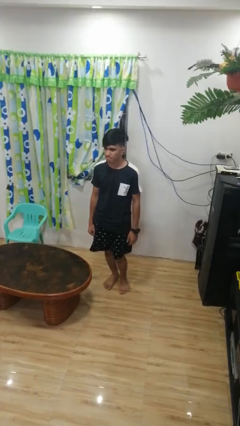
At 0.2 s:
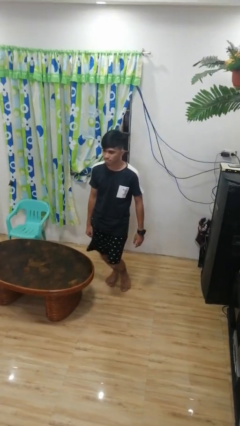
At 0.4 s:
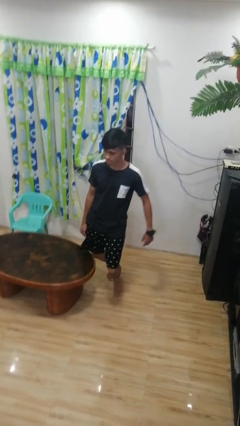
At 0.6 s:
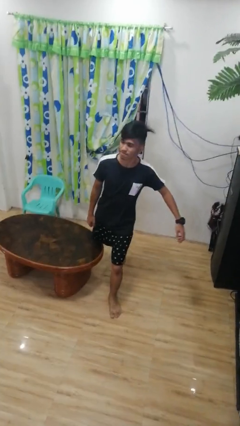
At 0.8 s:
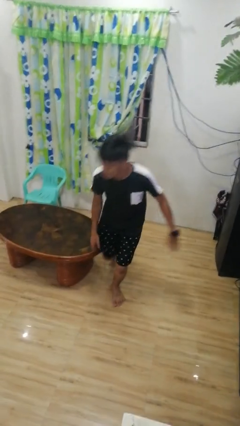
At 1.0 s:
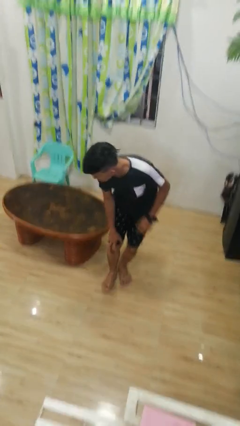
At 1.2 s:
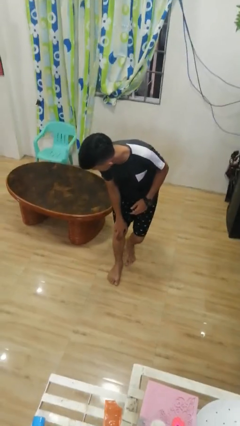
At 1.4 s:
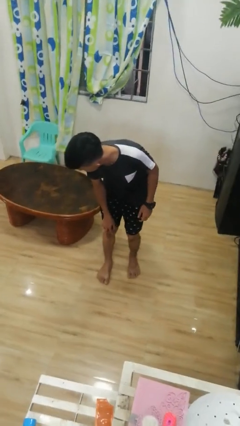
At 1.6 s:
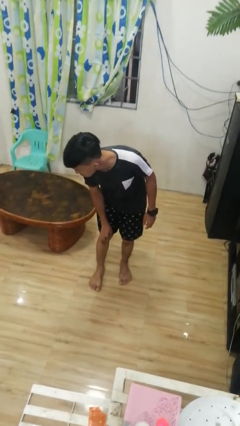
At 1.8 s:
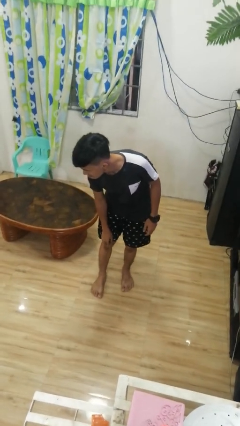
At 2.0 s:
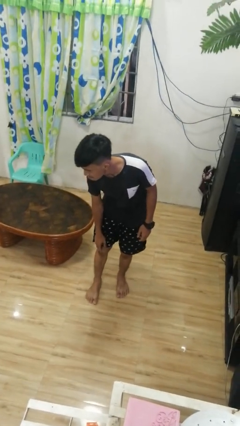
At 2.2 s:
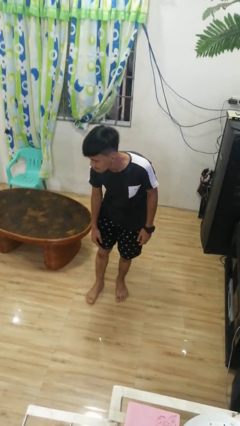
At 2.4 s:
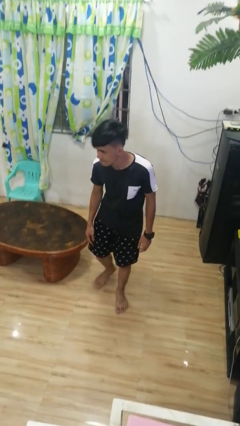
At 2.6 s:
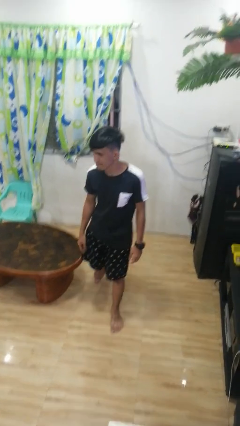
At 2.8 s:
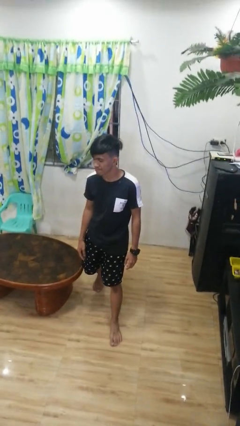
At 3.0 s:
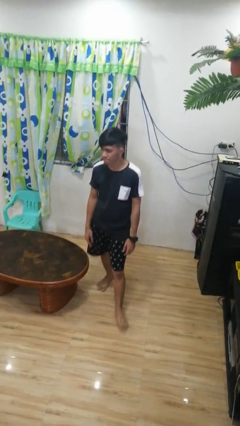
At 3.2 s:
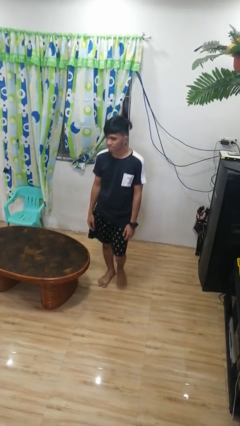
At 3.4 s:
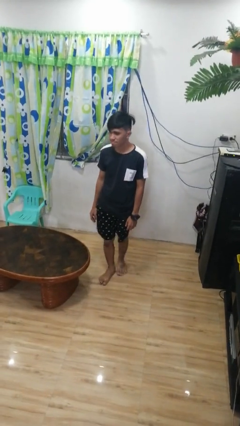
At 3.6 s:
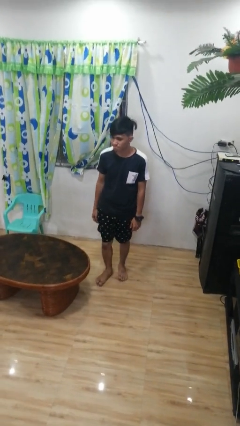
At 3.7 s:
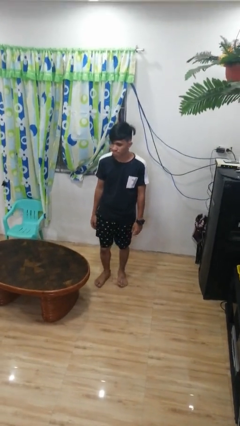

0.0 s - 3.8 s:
person bumps into table

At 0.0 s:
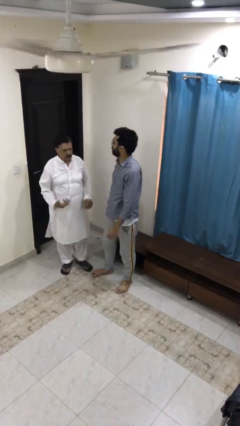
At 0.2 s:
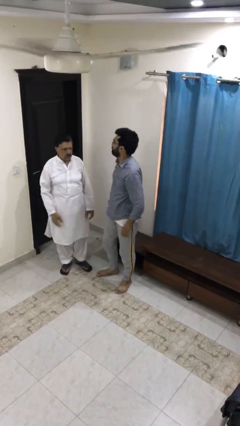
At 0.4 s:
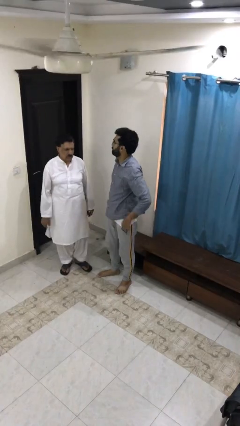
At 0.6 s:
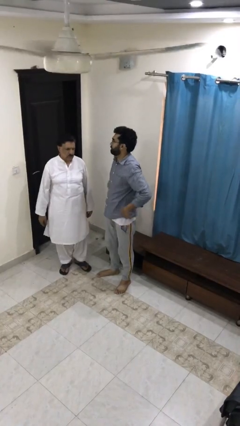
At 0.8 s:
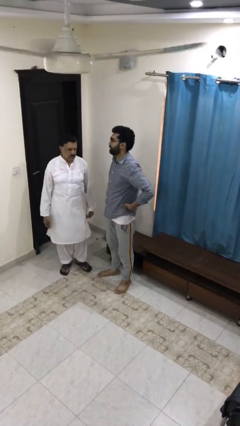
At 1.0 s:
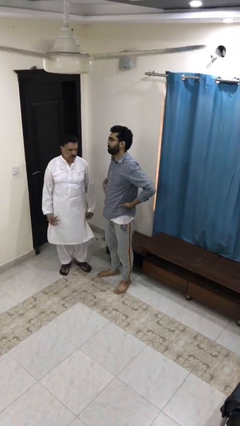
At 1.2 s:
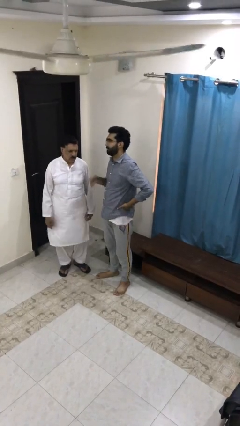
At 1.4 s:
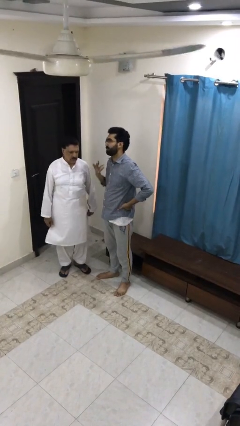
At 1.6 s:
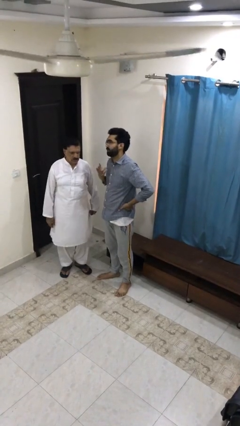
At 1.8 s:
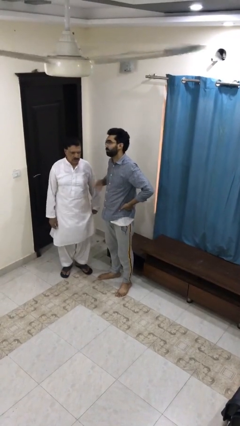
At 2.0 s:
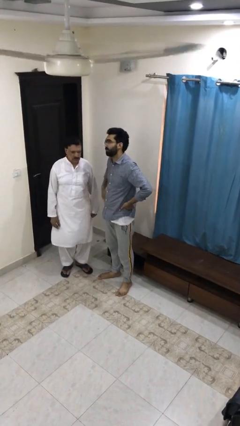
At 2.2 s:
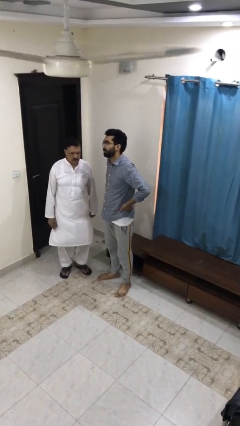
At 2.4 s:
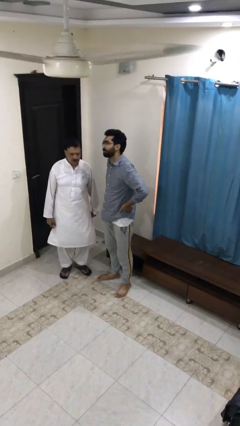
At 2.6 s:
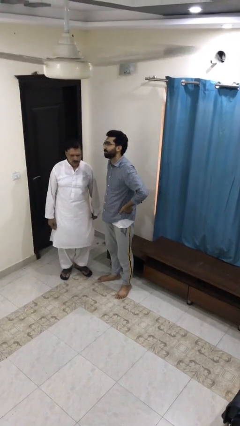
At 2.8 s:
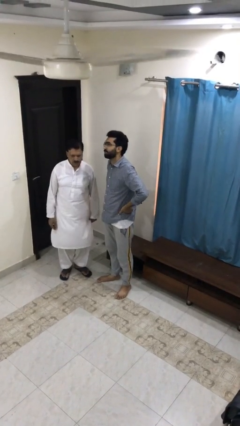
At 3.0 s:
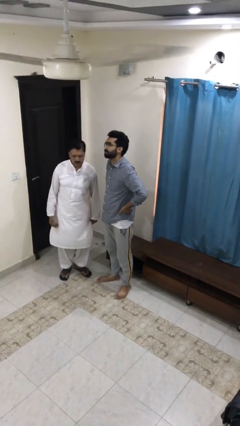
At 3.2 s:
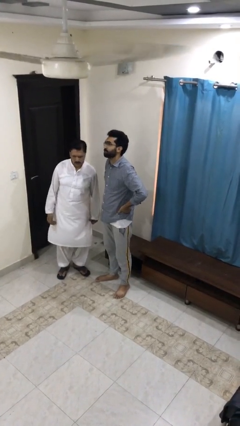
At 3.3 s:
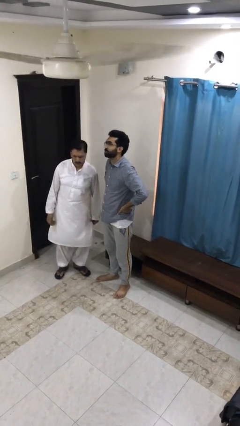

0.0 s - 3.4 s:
person talks to person

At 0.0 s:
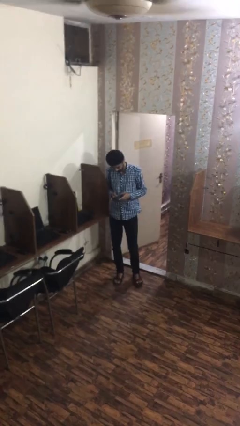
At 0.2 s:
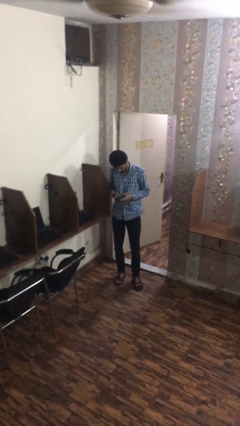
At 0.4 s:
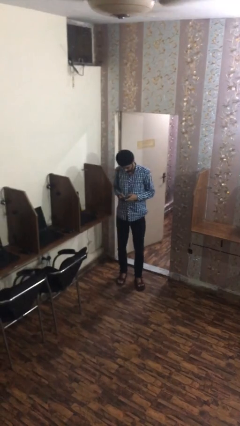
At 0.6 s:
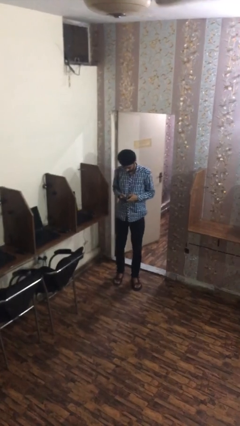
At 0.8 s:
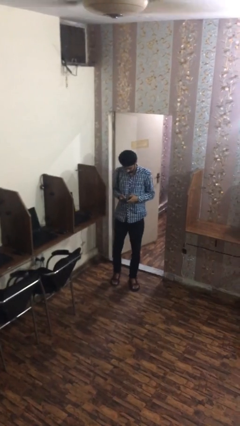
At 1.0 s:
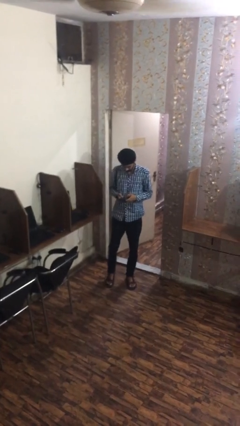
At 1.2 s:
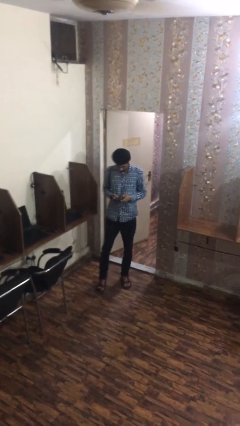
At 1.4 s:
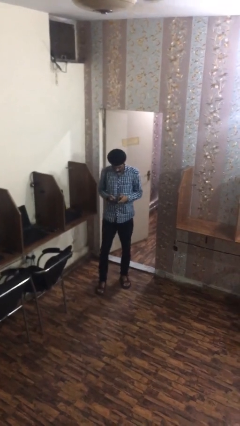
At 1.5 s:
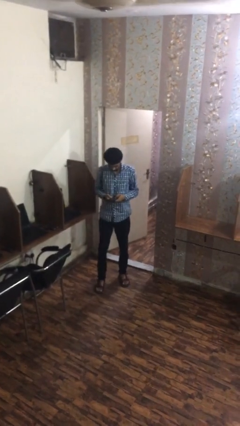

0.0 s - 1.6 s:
person texts on phone

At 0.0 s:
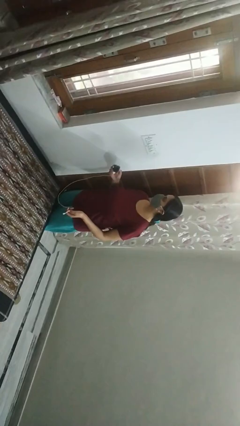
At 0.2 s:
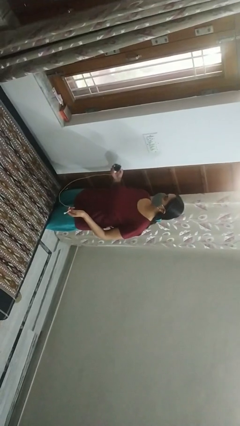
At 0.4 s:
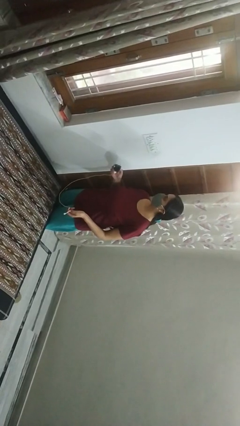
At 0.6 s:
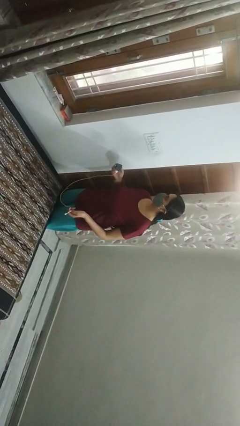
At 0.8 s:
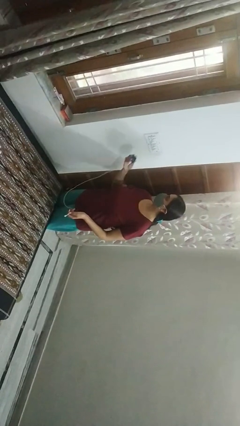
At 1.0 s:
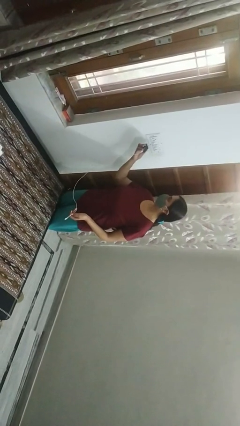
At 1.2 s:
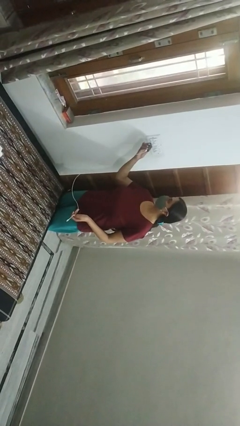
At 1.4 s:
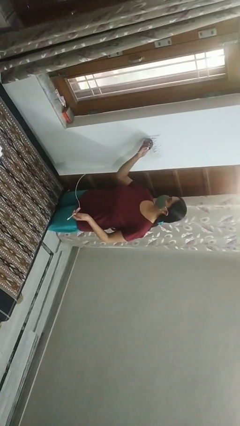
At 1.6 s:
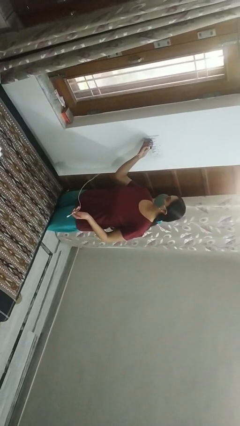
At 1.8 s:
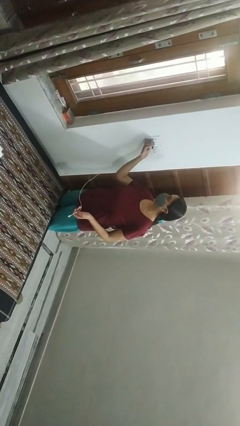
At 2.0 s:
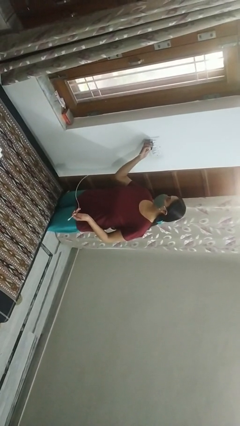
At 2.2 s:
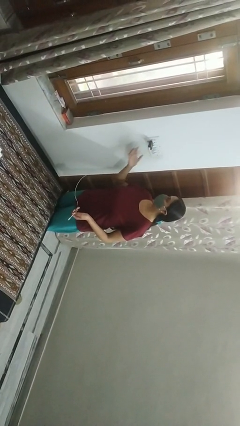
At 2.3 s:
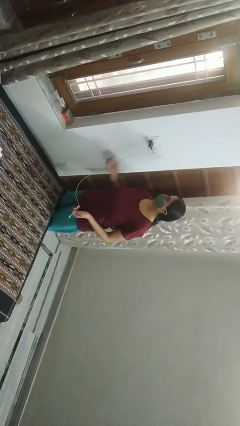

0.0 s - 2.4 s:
person plugs into electrical socket

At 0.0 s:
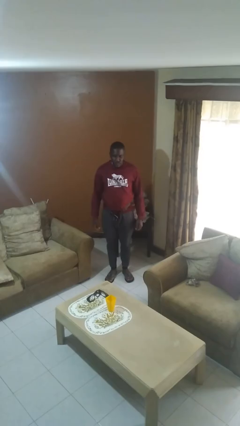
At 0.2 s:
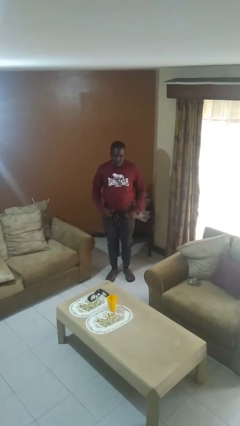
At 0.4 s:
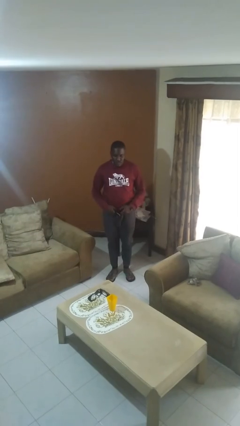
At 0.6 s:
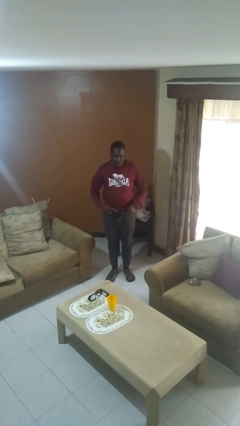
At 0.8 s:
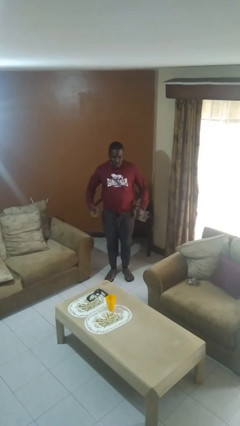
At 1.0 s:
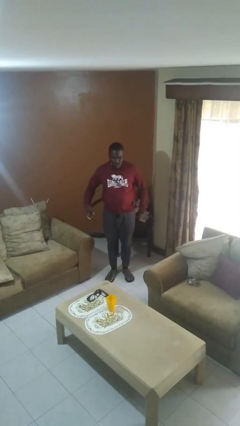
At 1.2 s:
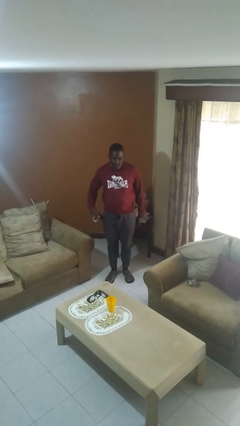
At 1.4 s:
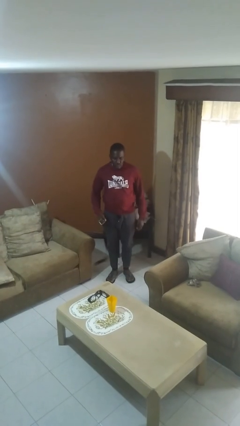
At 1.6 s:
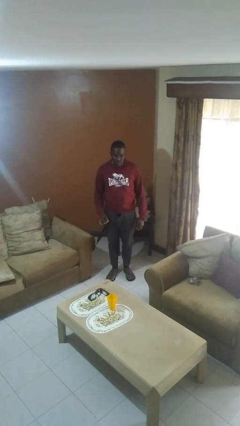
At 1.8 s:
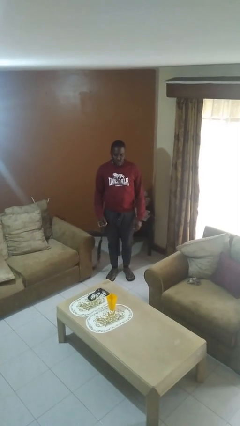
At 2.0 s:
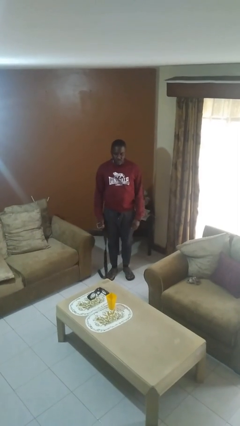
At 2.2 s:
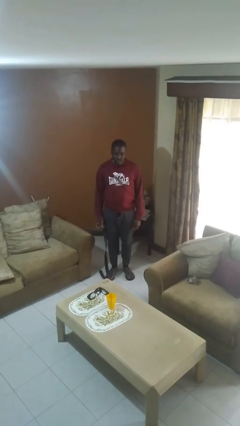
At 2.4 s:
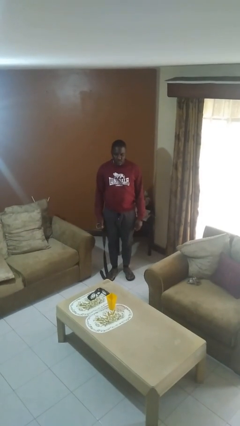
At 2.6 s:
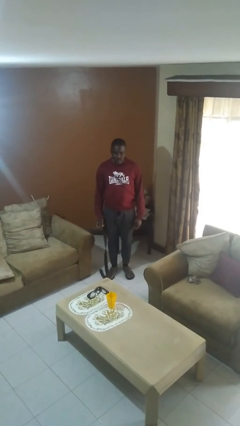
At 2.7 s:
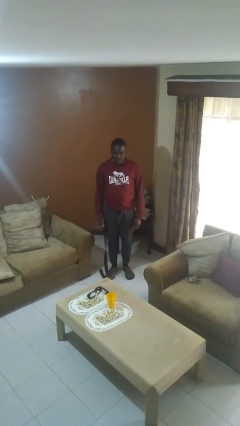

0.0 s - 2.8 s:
person takes off belt

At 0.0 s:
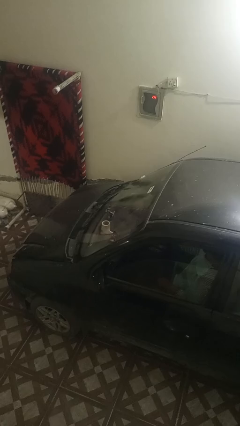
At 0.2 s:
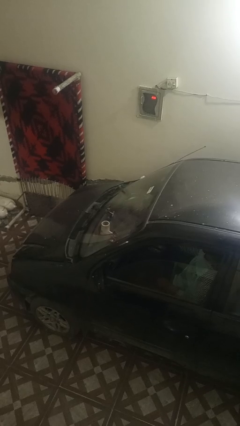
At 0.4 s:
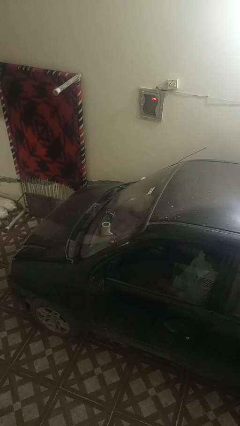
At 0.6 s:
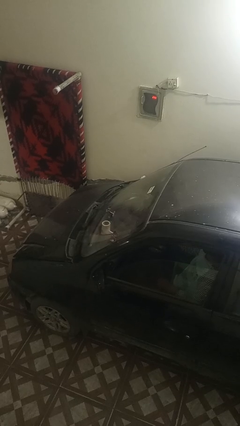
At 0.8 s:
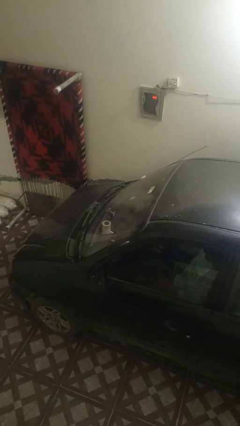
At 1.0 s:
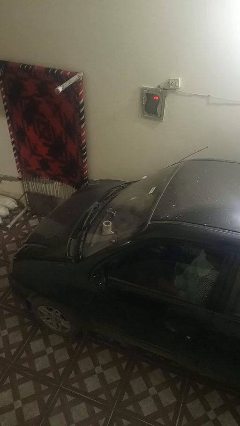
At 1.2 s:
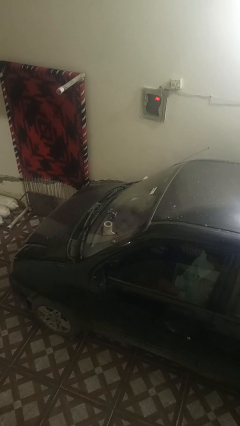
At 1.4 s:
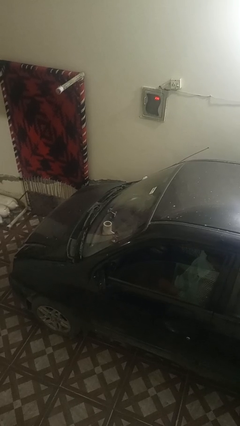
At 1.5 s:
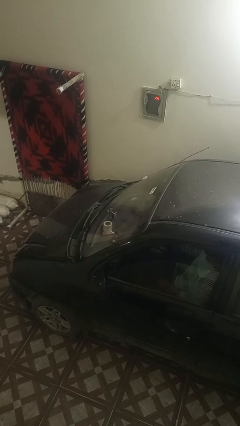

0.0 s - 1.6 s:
person flips down car wipers

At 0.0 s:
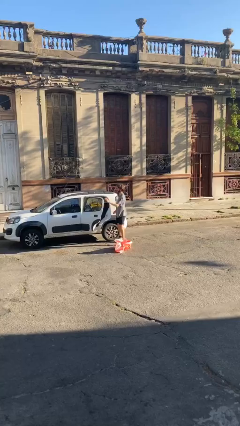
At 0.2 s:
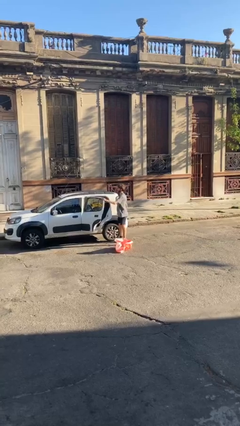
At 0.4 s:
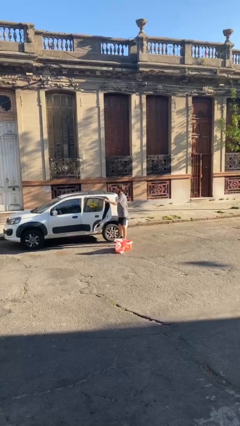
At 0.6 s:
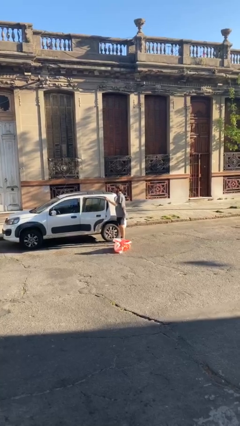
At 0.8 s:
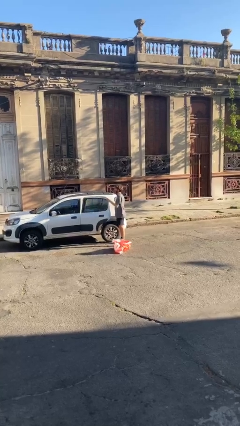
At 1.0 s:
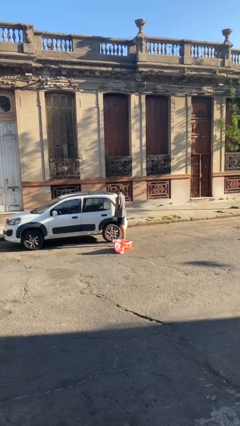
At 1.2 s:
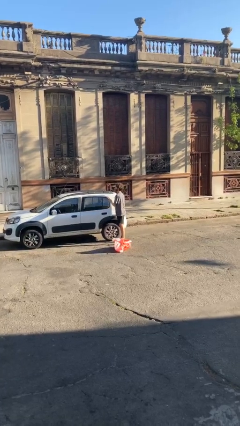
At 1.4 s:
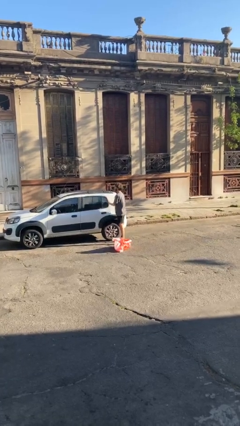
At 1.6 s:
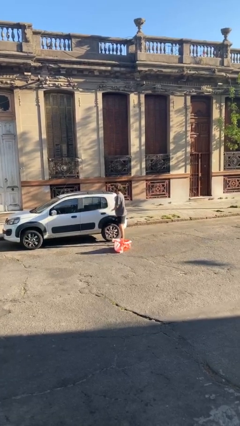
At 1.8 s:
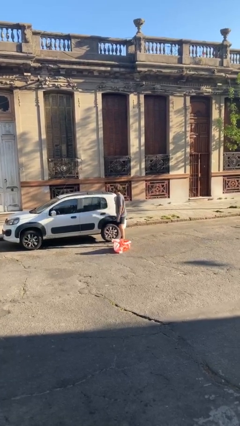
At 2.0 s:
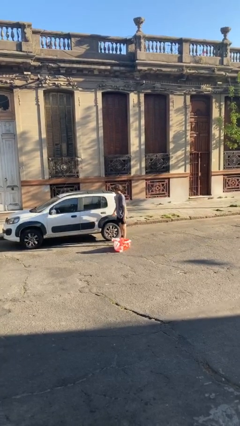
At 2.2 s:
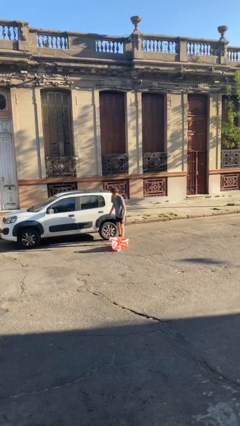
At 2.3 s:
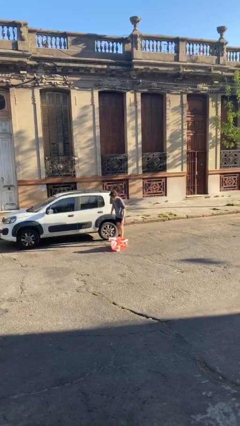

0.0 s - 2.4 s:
person closes car door
